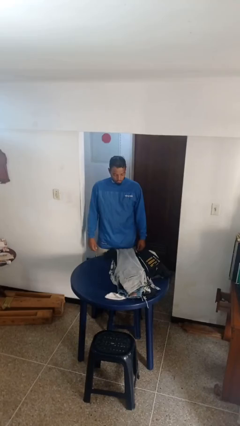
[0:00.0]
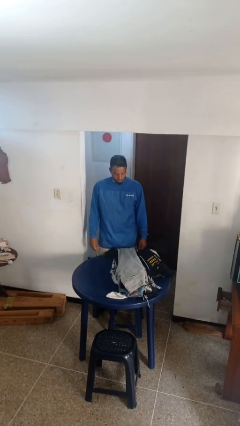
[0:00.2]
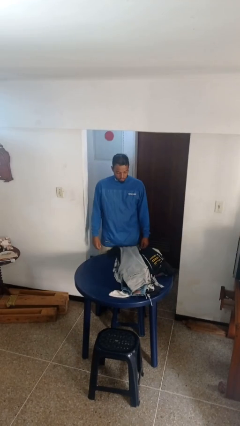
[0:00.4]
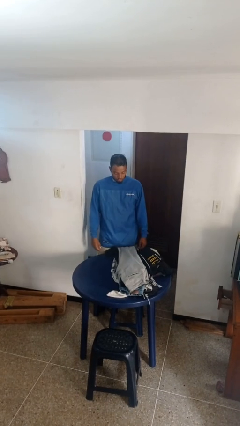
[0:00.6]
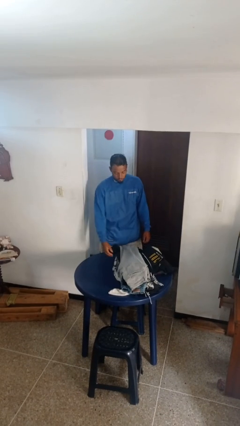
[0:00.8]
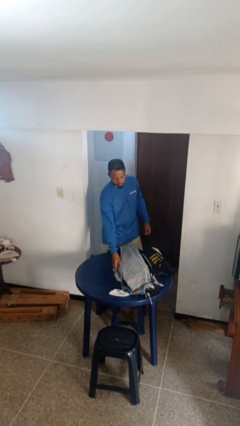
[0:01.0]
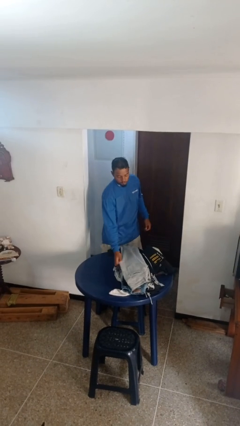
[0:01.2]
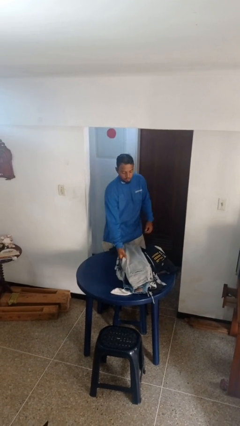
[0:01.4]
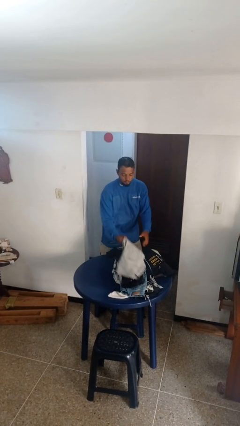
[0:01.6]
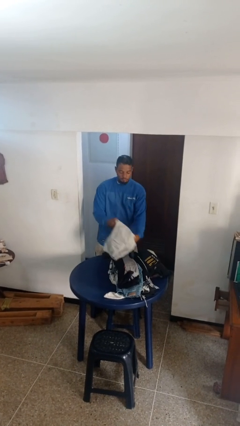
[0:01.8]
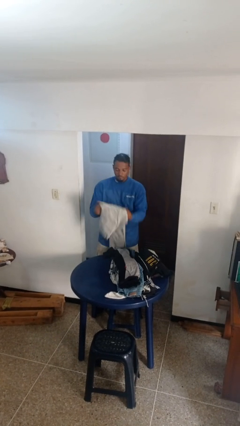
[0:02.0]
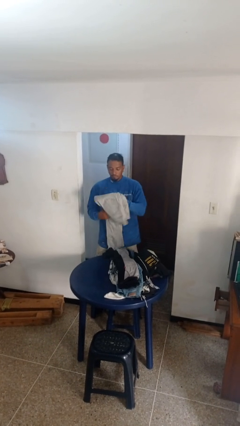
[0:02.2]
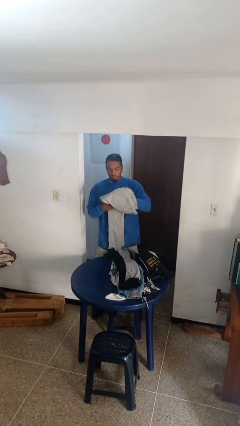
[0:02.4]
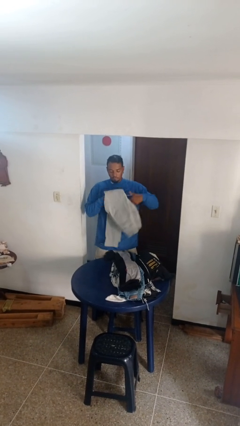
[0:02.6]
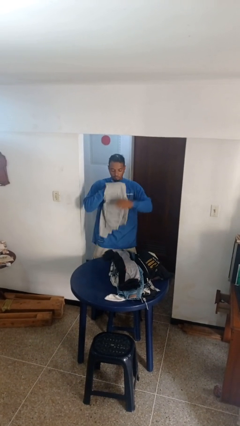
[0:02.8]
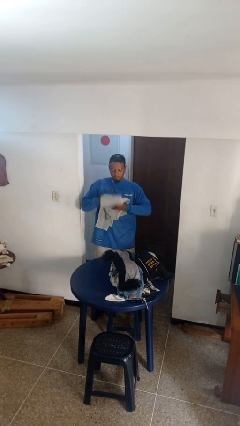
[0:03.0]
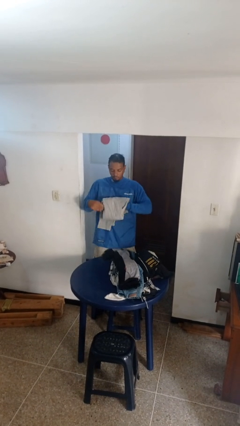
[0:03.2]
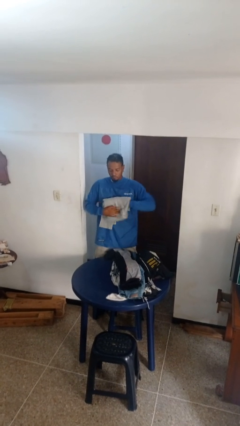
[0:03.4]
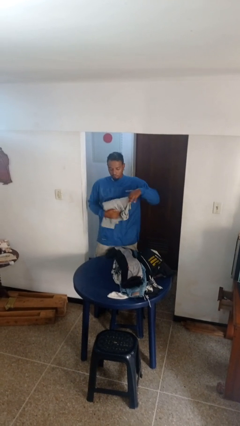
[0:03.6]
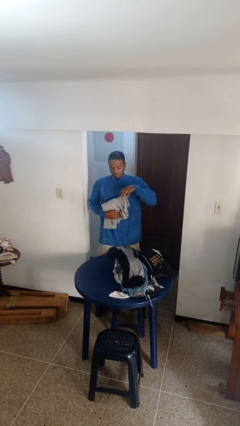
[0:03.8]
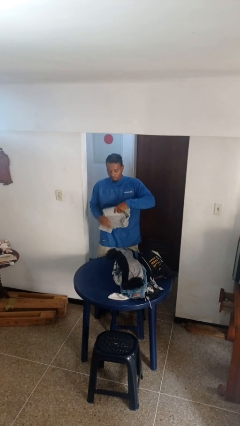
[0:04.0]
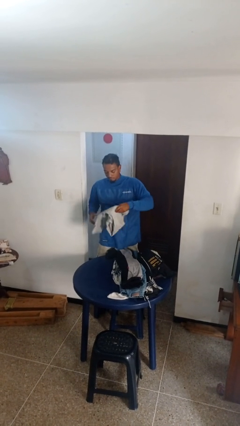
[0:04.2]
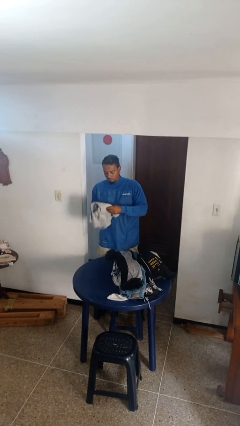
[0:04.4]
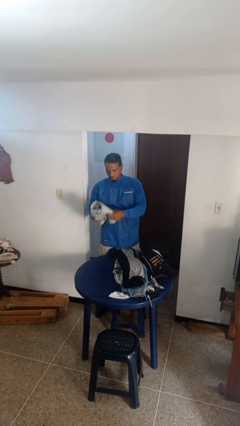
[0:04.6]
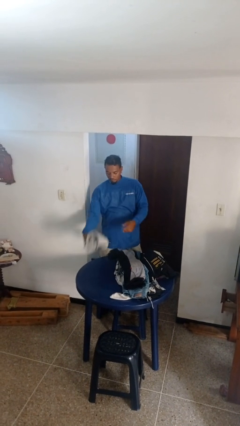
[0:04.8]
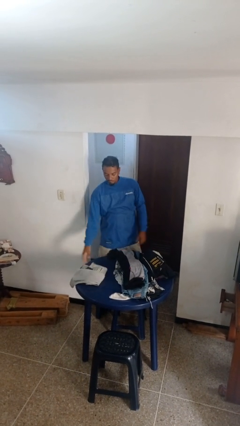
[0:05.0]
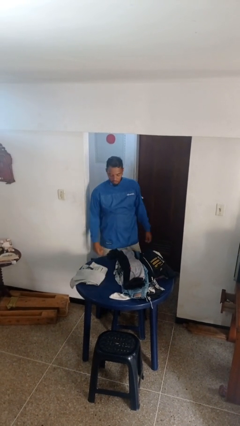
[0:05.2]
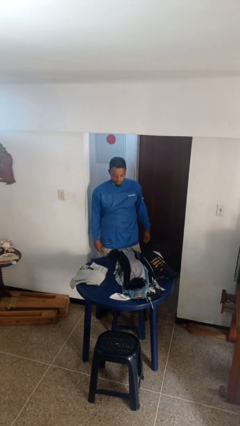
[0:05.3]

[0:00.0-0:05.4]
person folds pants

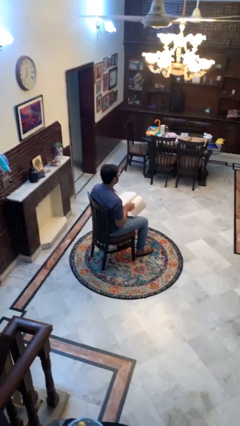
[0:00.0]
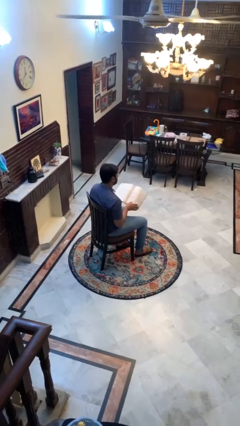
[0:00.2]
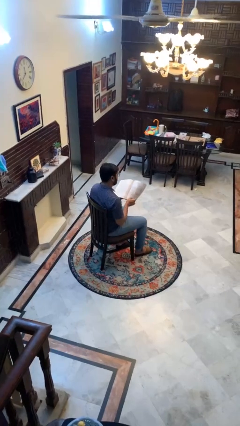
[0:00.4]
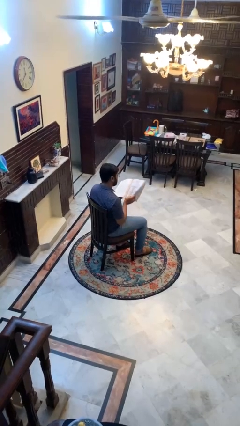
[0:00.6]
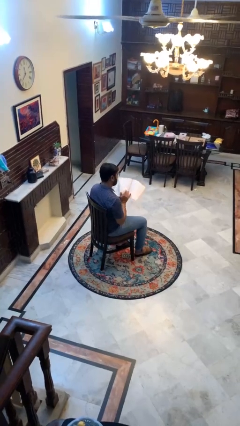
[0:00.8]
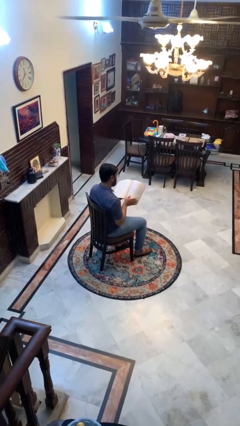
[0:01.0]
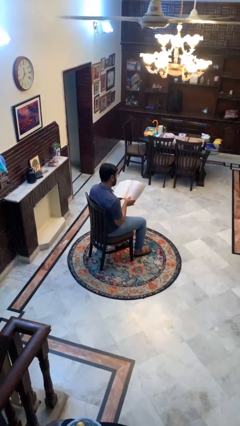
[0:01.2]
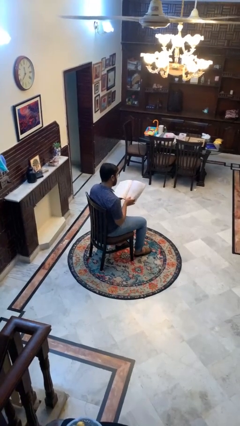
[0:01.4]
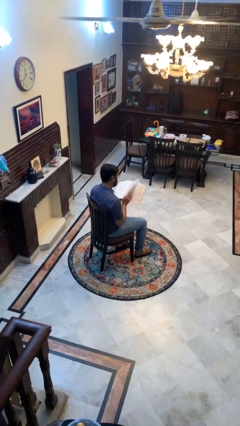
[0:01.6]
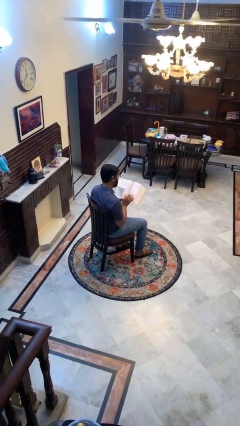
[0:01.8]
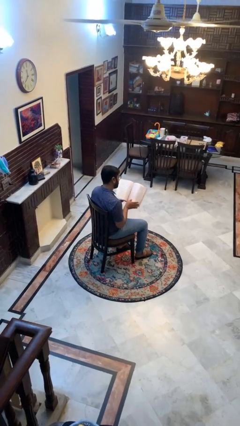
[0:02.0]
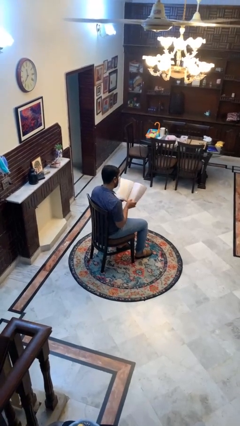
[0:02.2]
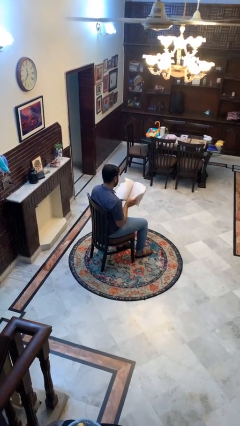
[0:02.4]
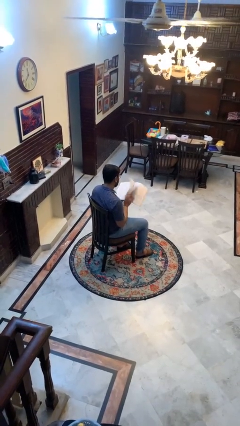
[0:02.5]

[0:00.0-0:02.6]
person reads book

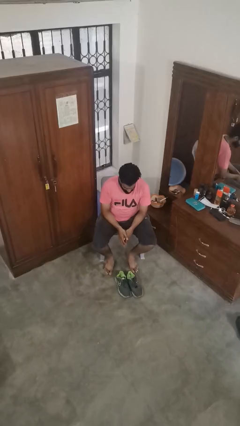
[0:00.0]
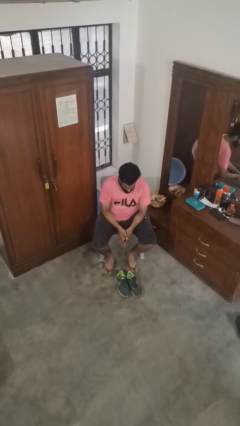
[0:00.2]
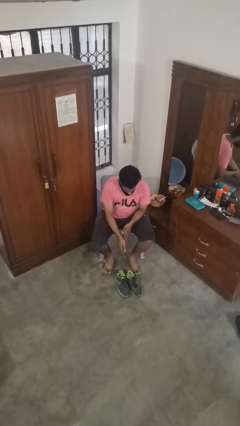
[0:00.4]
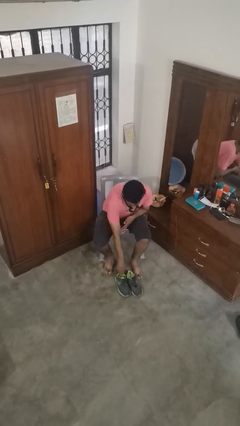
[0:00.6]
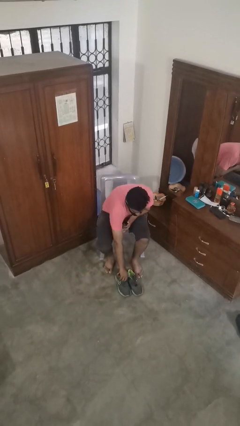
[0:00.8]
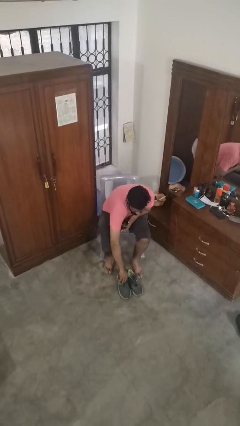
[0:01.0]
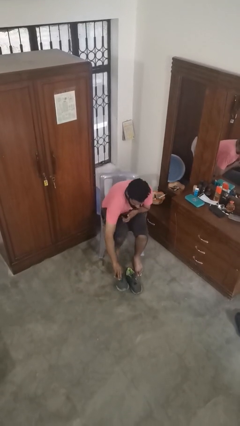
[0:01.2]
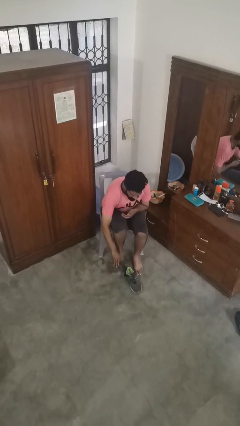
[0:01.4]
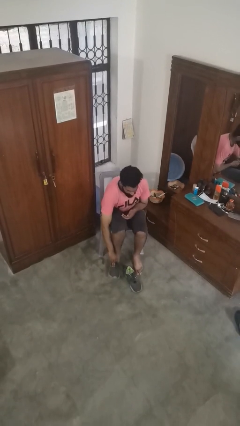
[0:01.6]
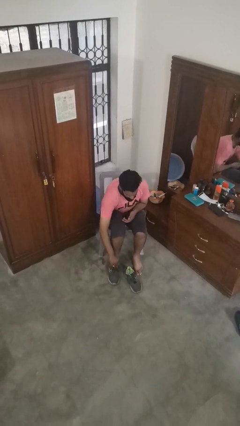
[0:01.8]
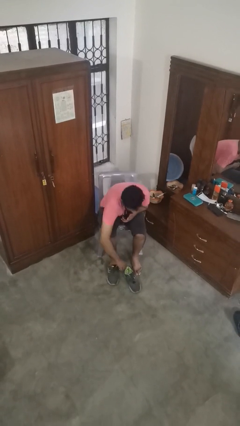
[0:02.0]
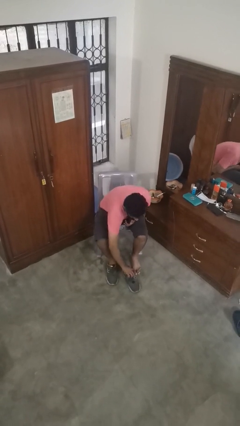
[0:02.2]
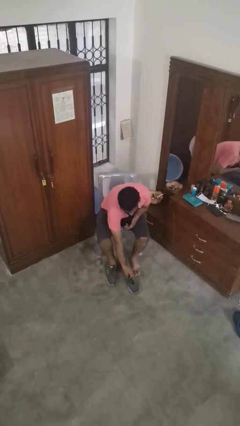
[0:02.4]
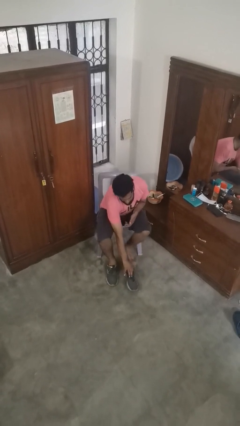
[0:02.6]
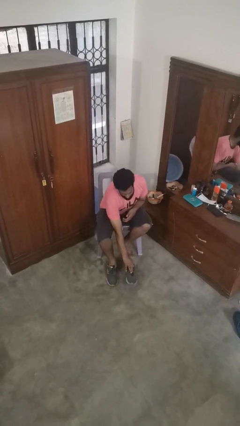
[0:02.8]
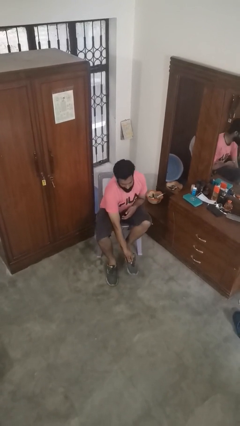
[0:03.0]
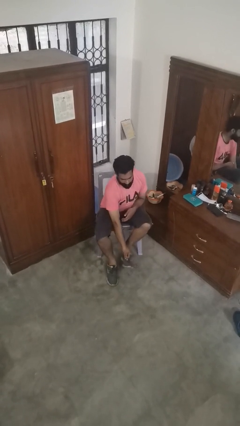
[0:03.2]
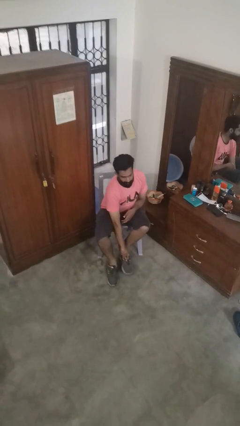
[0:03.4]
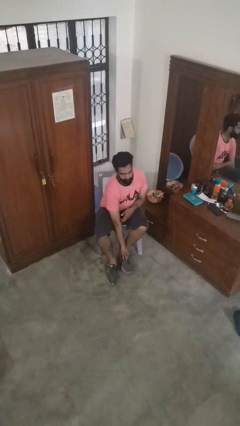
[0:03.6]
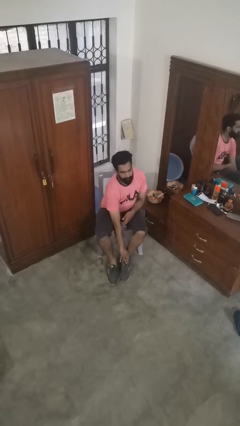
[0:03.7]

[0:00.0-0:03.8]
person puts on shoes

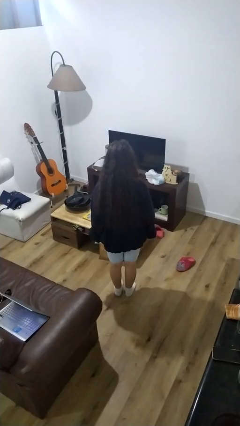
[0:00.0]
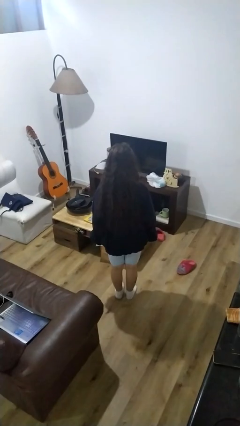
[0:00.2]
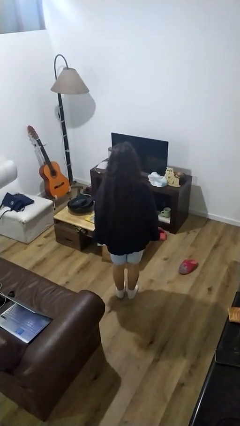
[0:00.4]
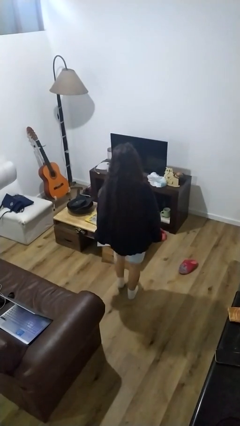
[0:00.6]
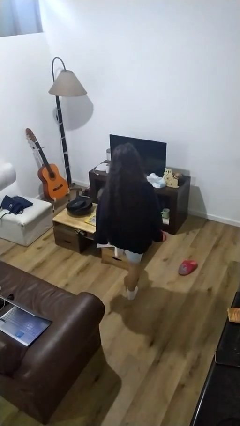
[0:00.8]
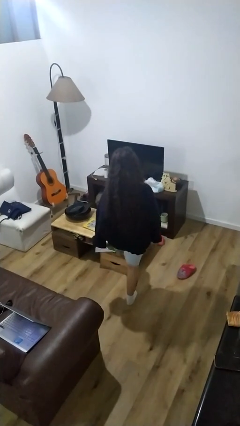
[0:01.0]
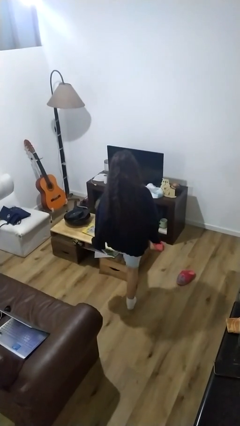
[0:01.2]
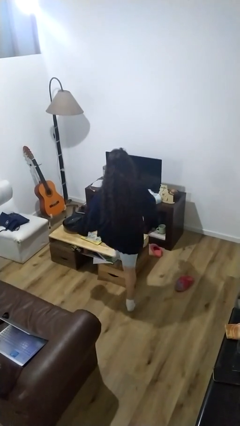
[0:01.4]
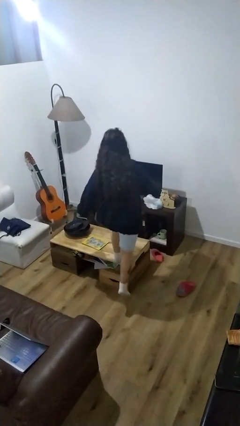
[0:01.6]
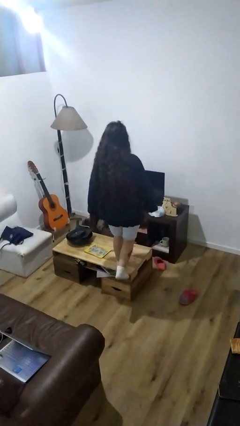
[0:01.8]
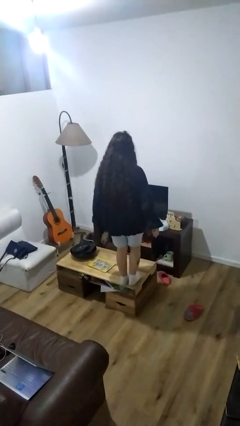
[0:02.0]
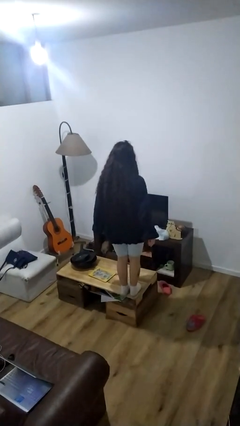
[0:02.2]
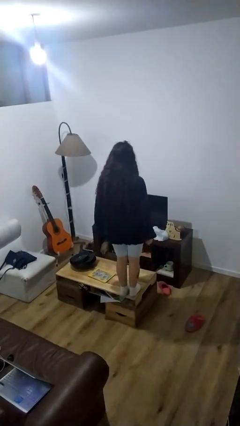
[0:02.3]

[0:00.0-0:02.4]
person climbs on table

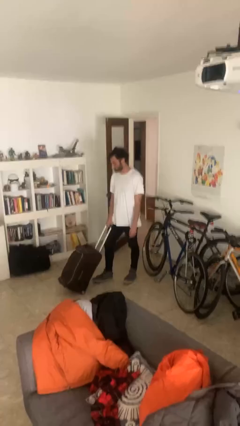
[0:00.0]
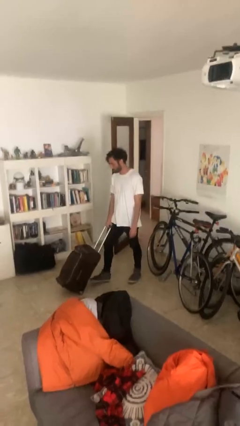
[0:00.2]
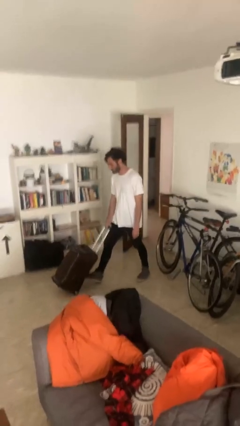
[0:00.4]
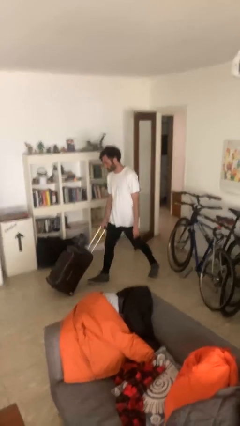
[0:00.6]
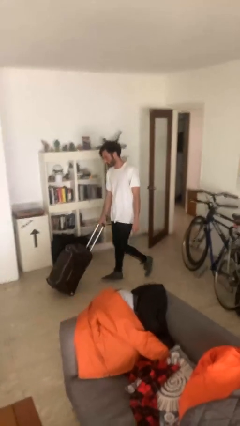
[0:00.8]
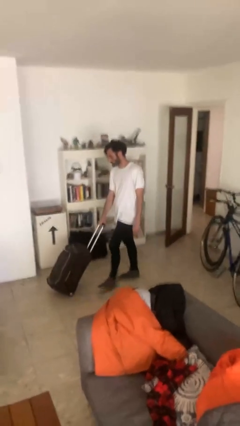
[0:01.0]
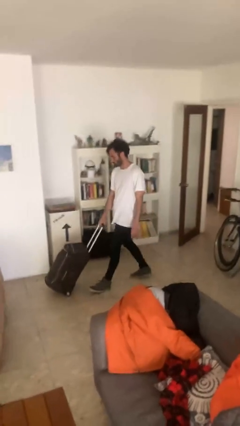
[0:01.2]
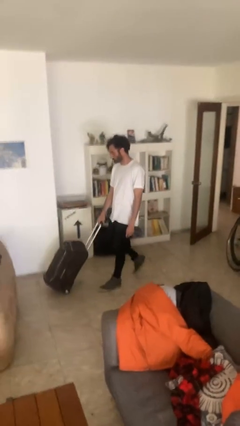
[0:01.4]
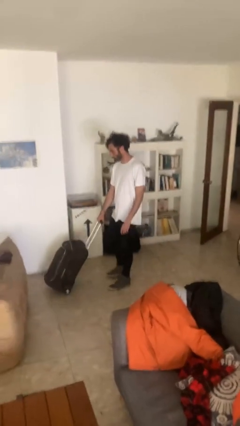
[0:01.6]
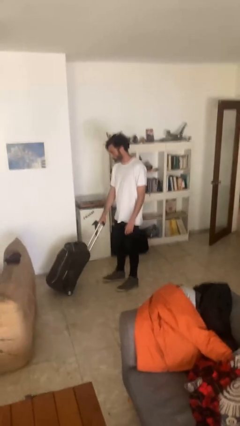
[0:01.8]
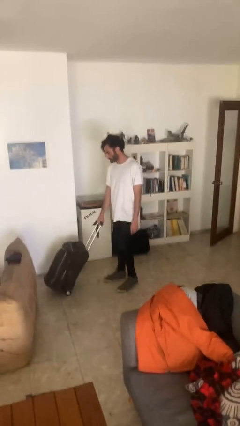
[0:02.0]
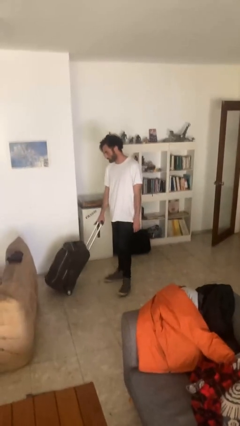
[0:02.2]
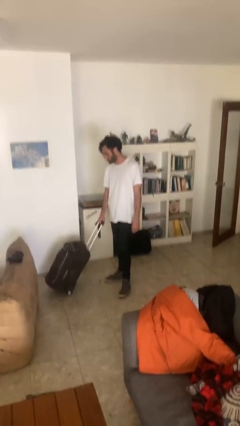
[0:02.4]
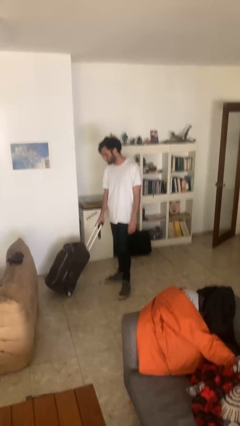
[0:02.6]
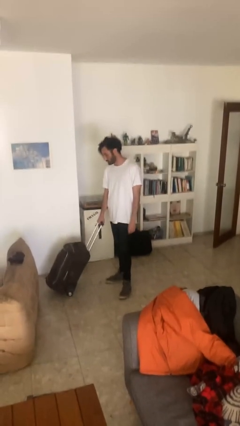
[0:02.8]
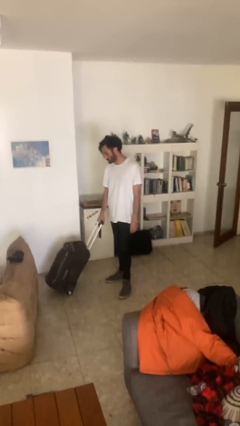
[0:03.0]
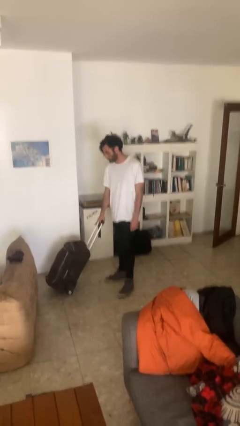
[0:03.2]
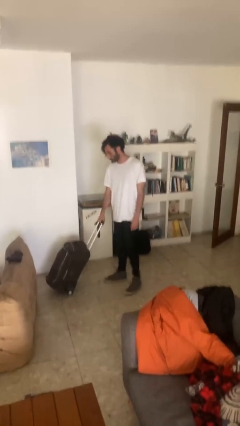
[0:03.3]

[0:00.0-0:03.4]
person pushes wheeled cart
